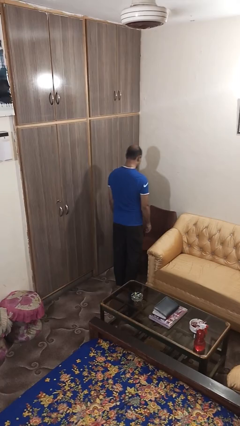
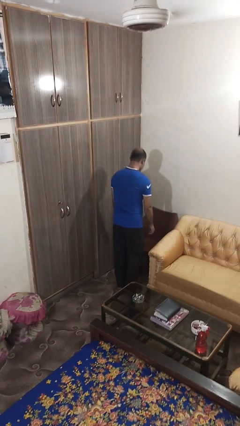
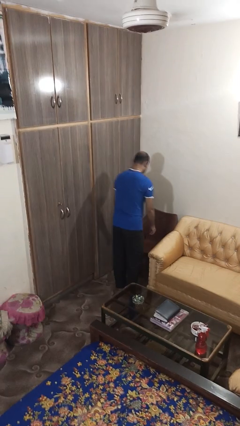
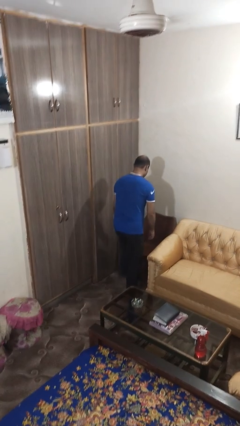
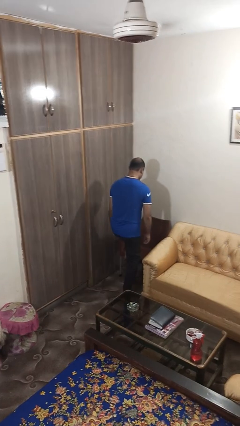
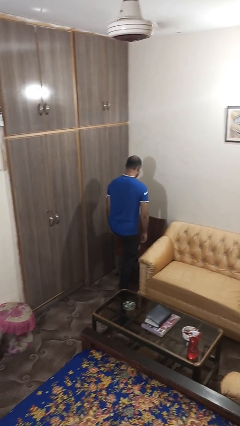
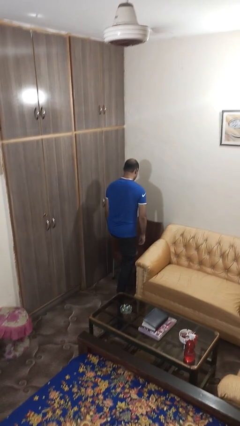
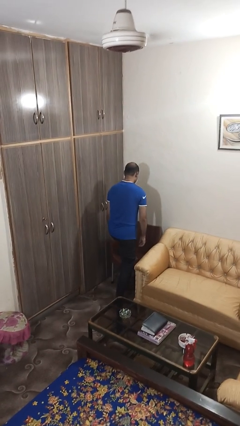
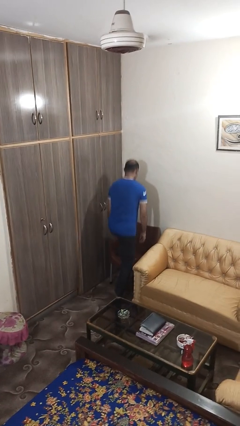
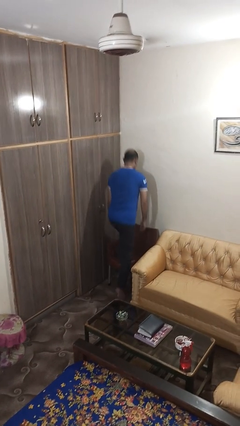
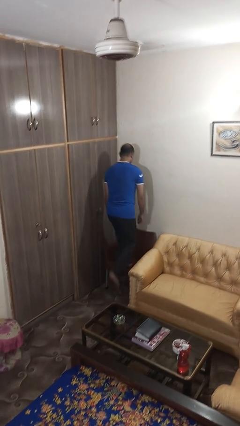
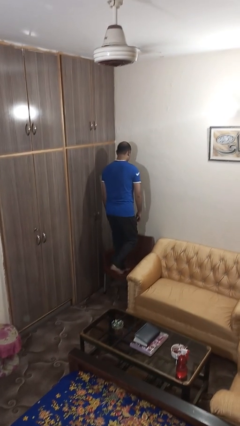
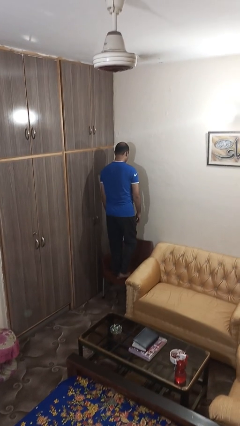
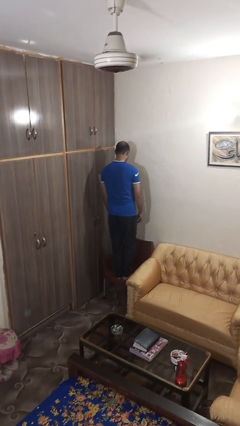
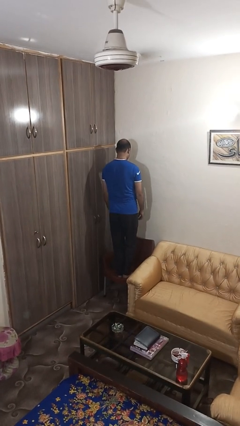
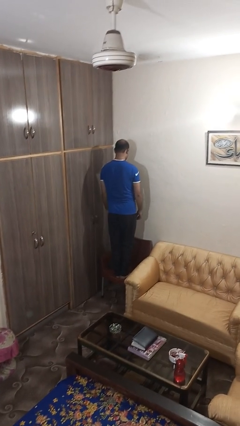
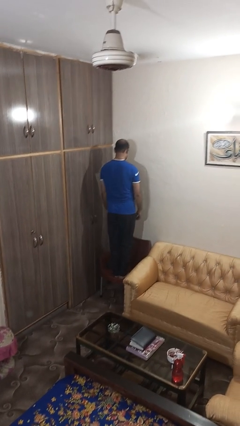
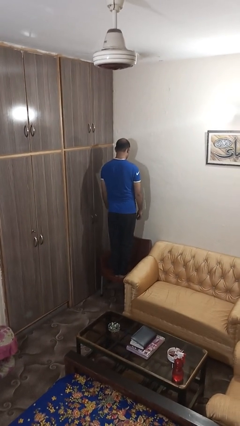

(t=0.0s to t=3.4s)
person climbs on chair

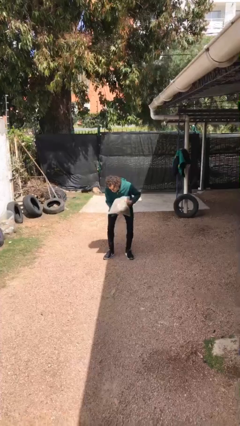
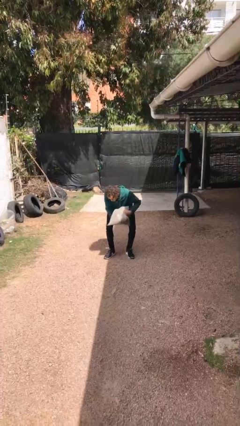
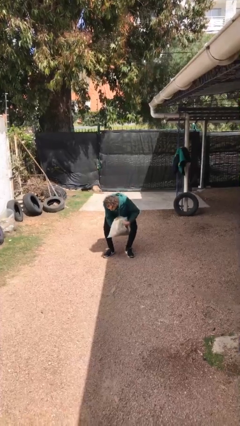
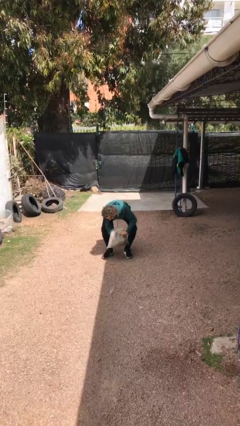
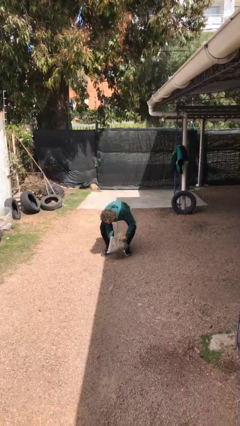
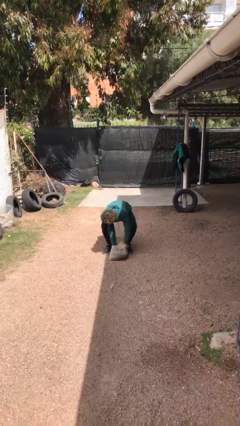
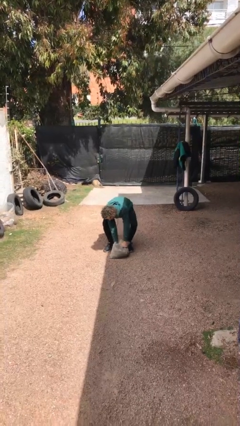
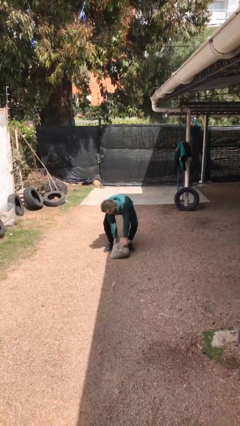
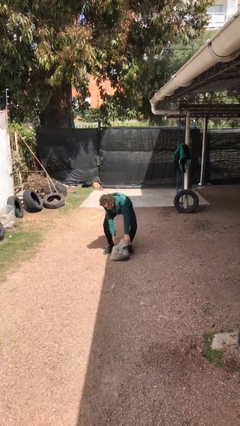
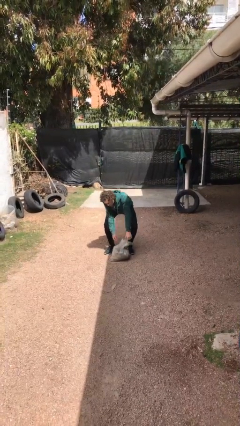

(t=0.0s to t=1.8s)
person puts down object on floor

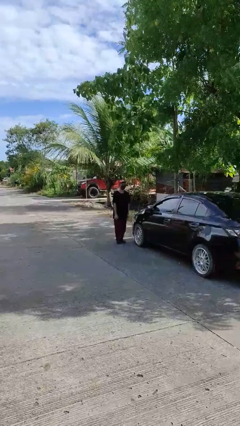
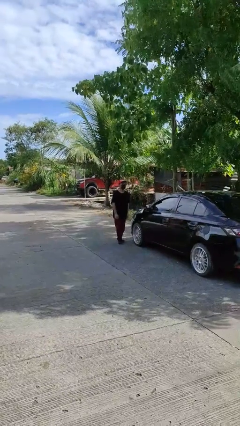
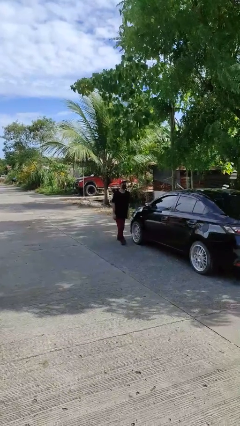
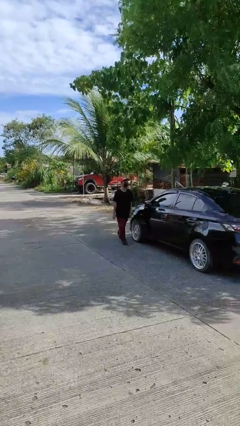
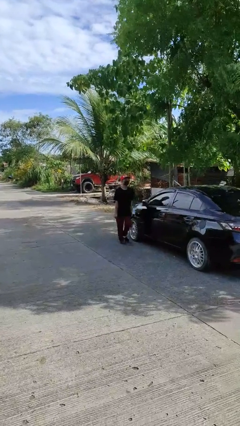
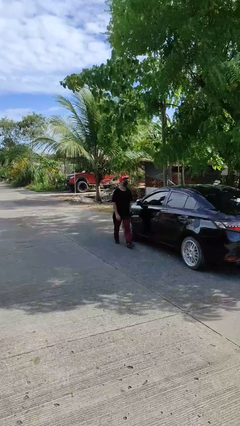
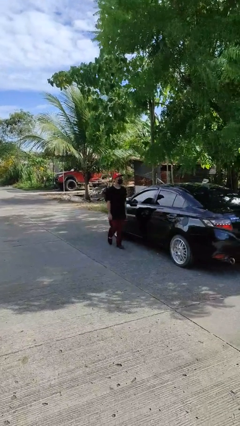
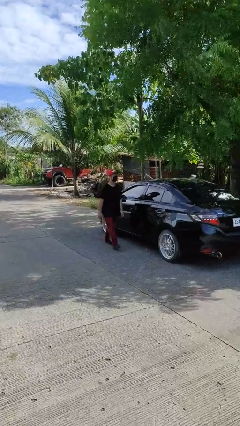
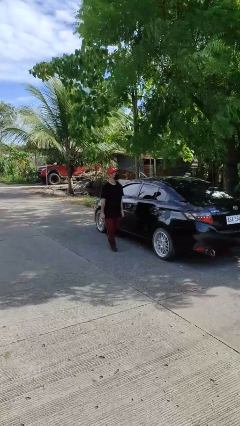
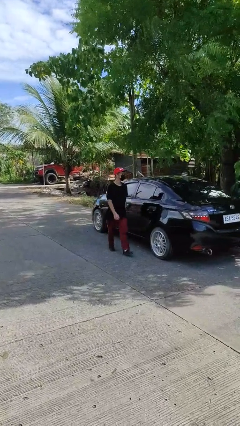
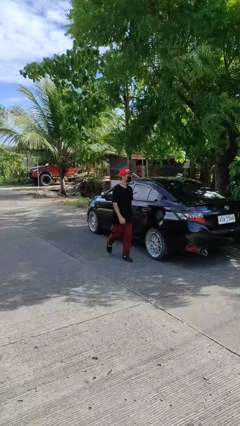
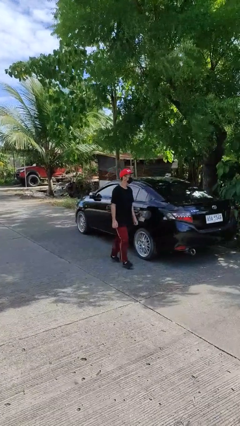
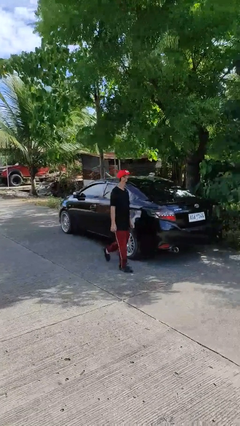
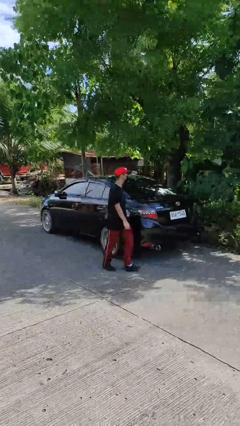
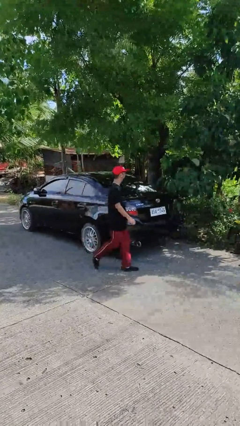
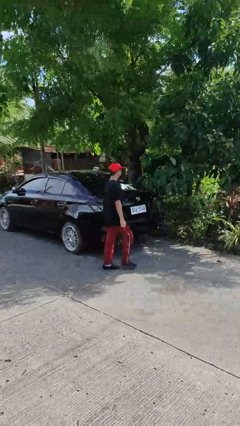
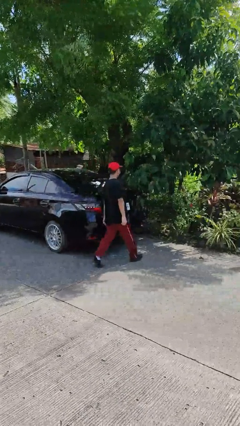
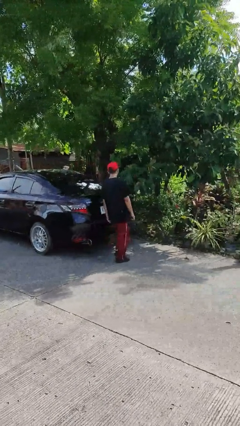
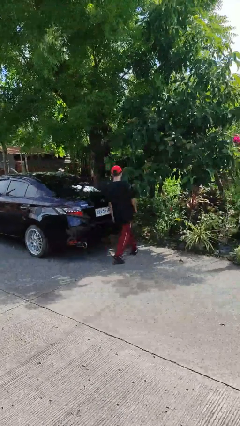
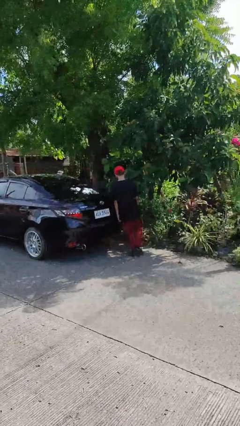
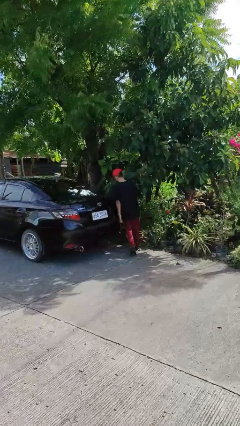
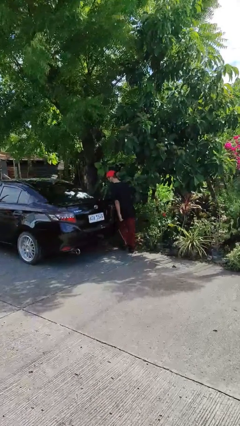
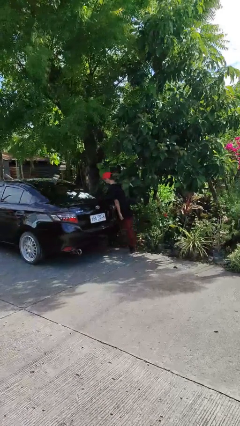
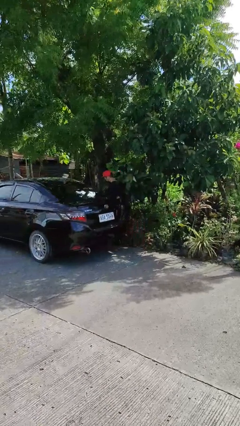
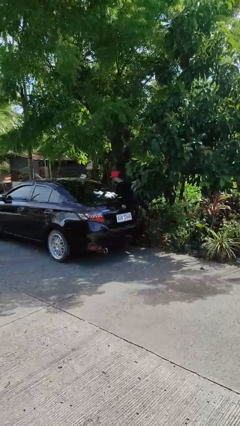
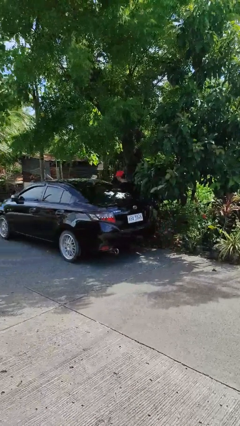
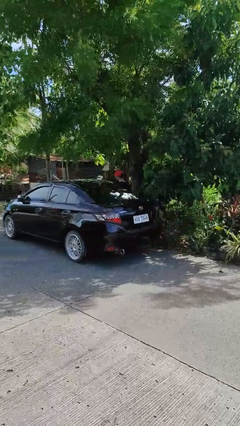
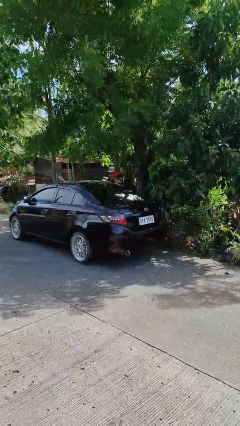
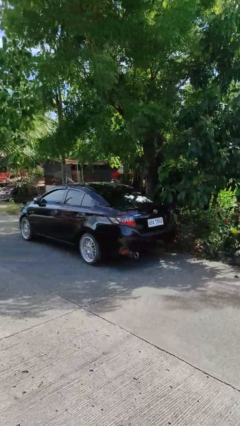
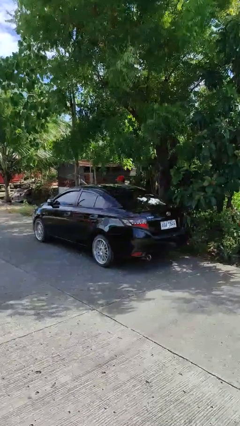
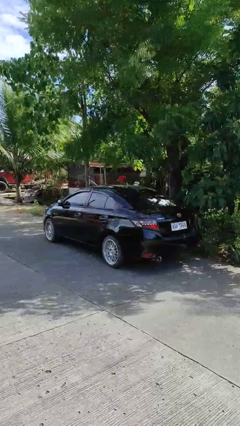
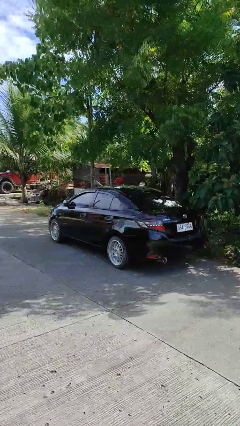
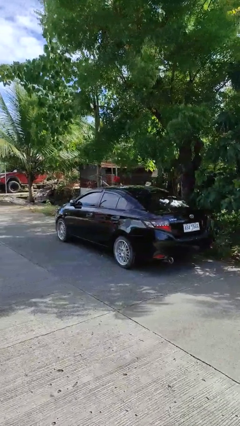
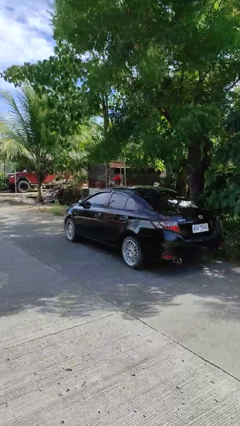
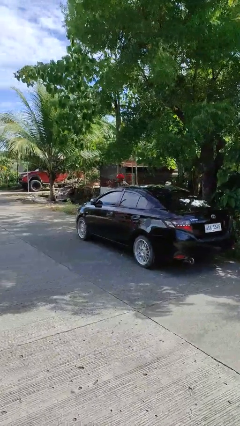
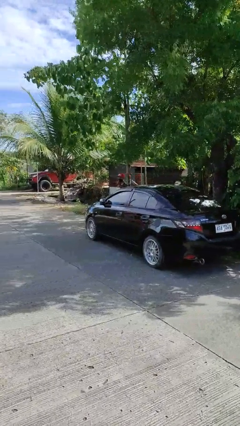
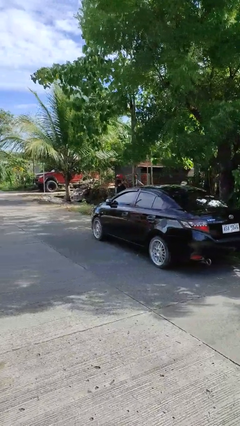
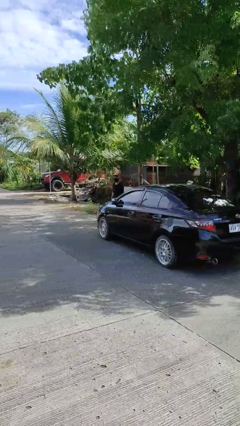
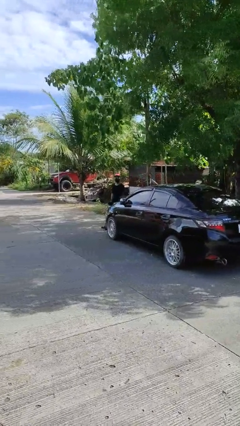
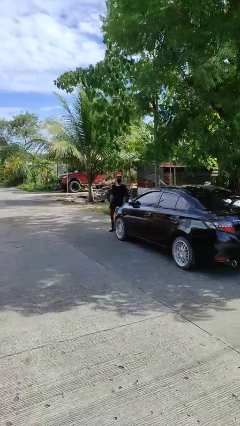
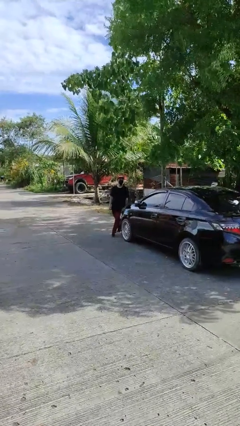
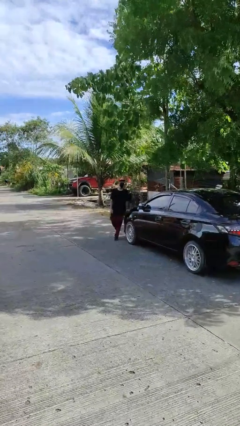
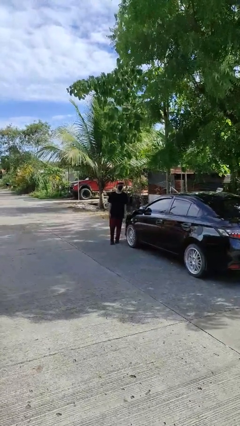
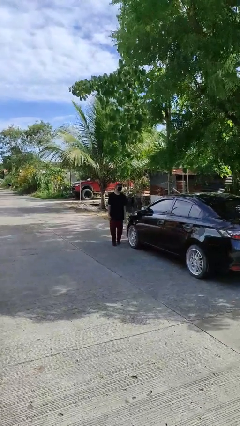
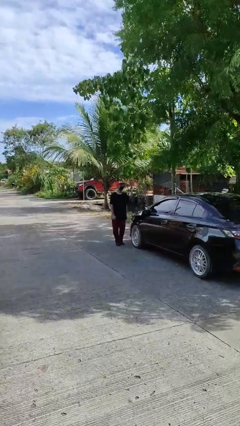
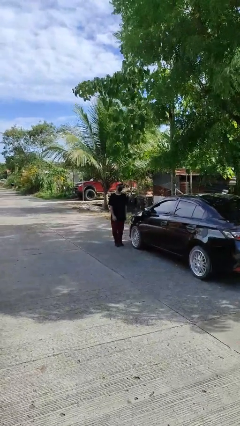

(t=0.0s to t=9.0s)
person walks around car

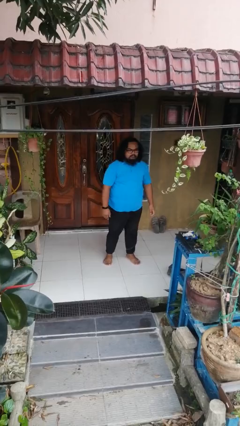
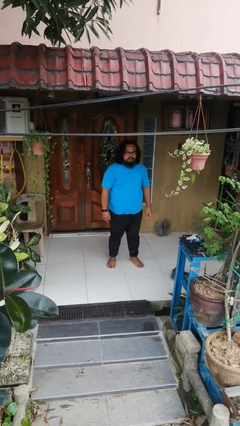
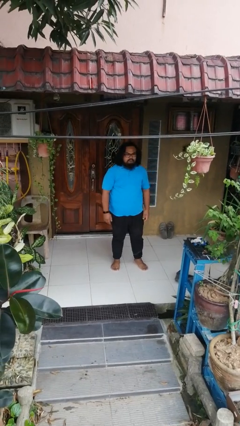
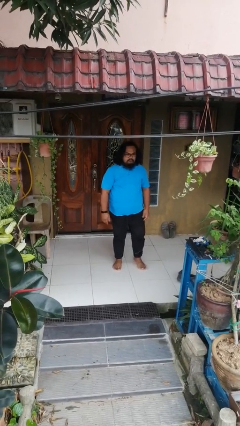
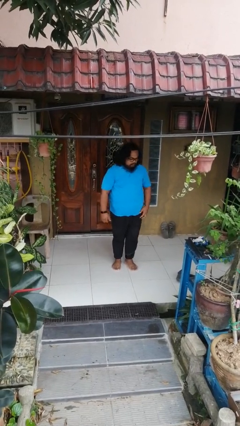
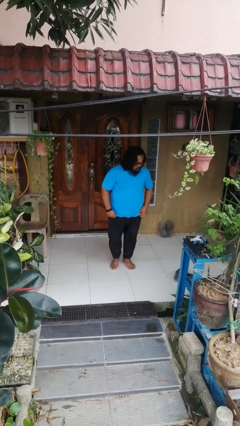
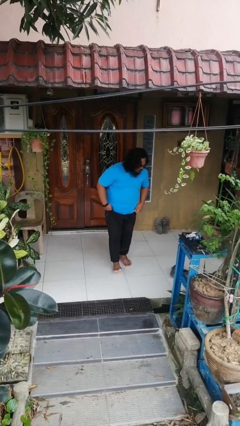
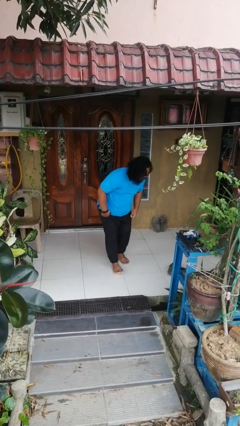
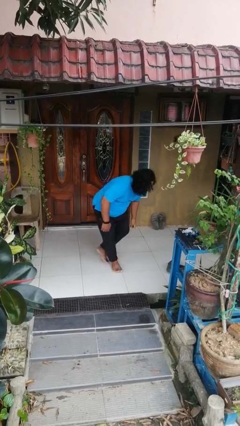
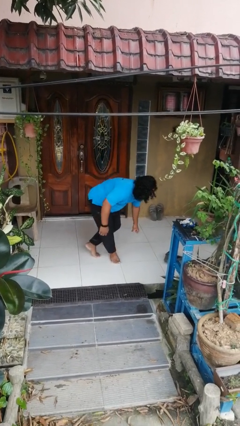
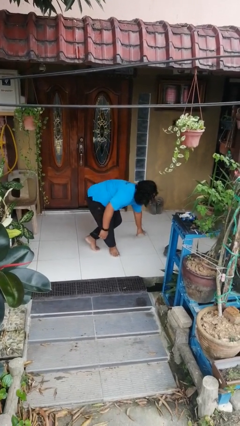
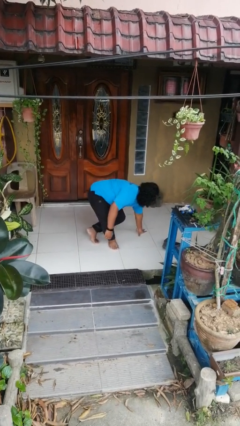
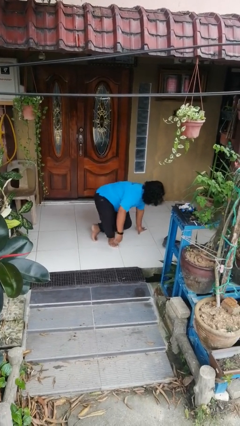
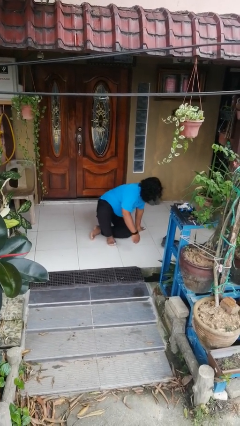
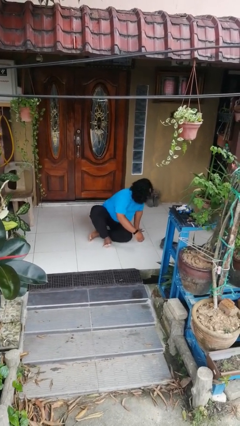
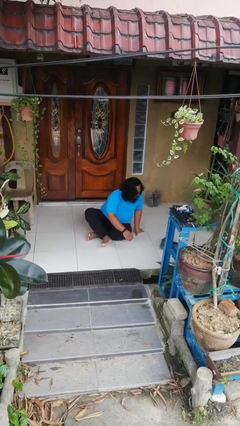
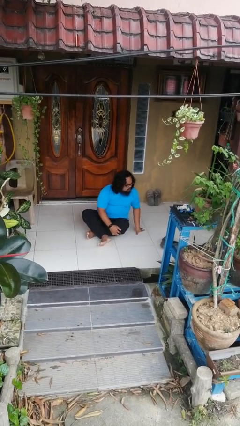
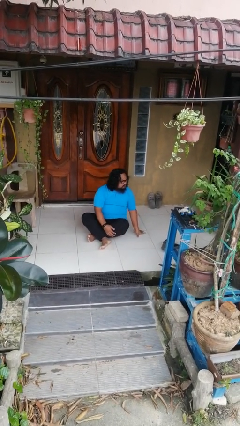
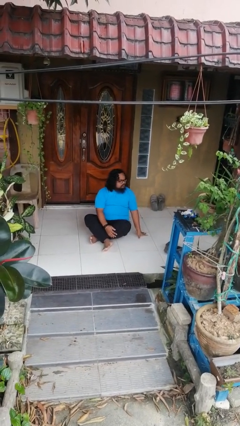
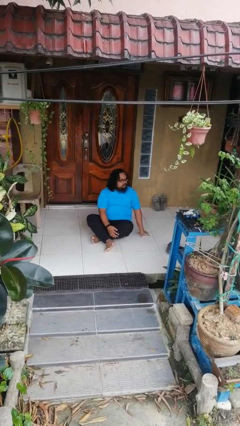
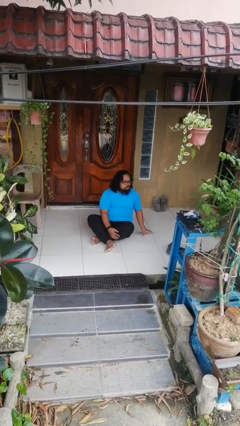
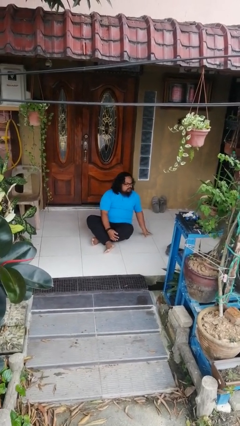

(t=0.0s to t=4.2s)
person sits crisscross
